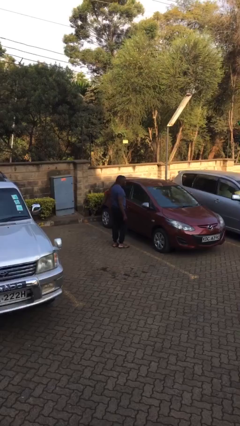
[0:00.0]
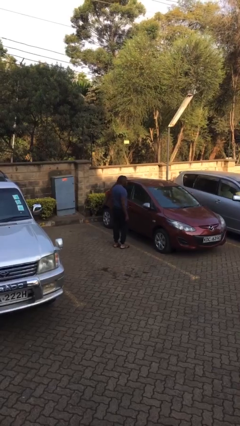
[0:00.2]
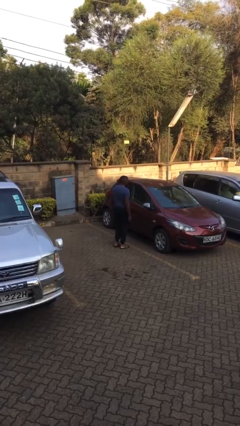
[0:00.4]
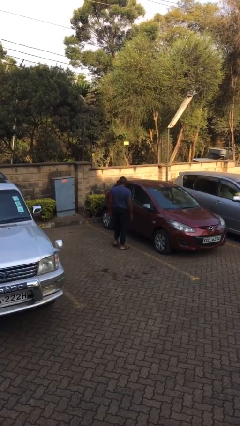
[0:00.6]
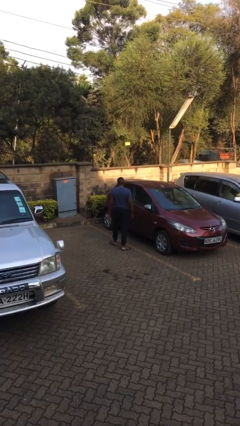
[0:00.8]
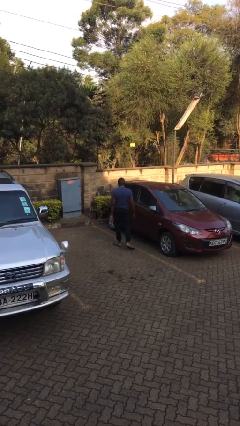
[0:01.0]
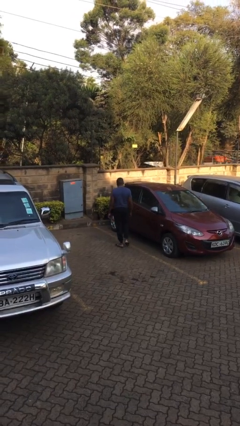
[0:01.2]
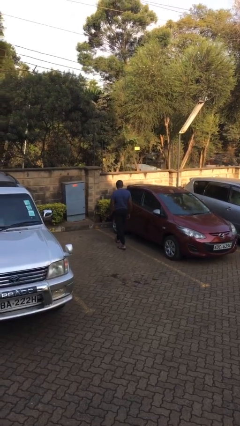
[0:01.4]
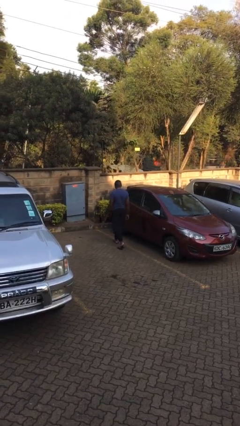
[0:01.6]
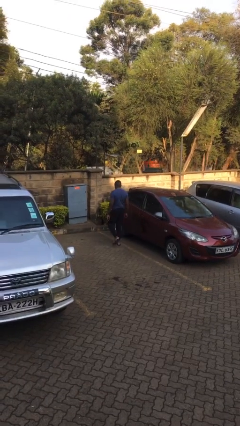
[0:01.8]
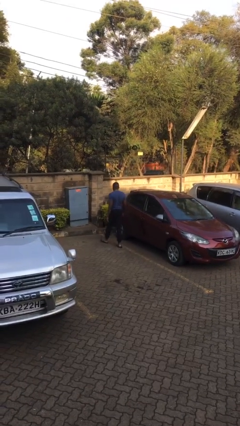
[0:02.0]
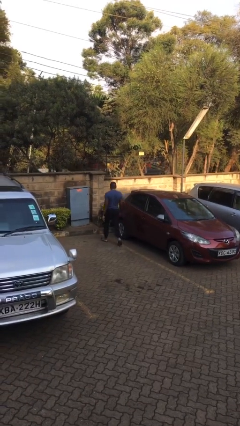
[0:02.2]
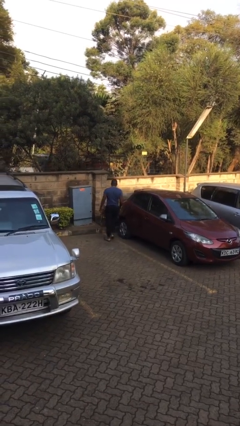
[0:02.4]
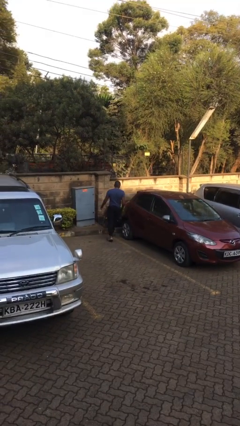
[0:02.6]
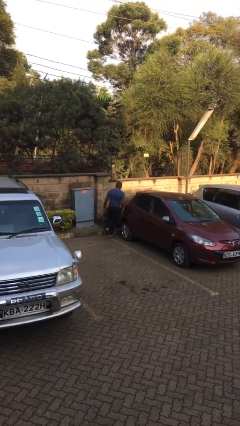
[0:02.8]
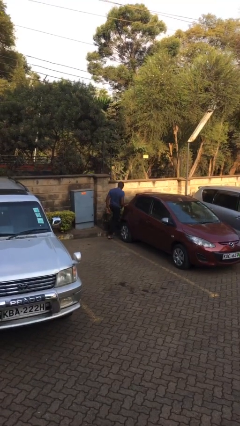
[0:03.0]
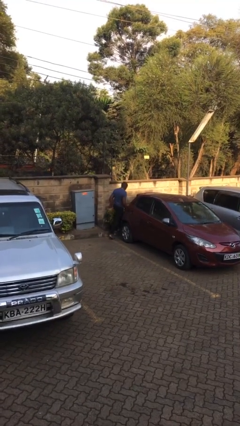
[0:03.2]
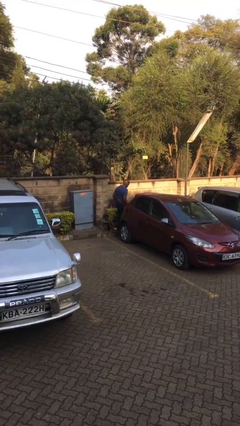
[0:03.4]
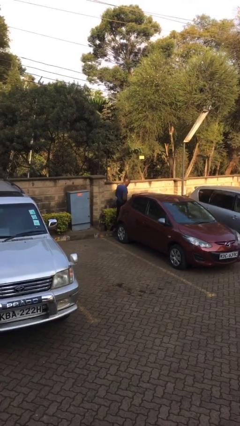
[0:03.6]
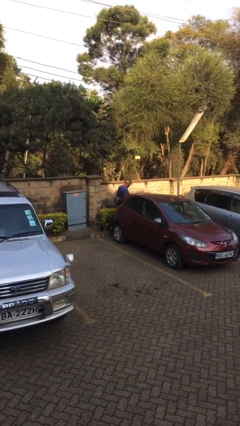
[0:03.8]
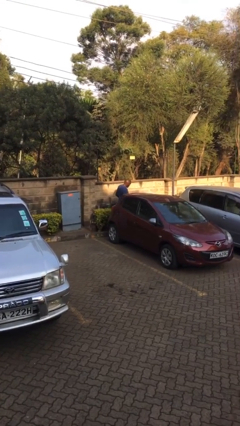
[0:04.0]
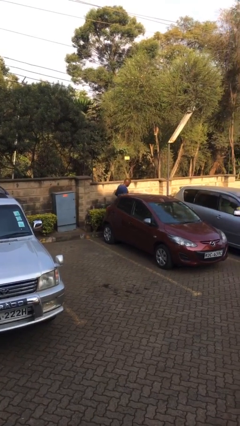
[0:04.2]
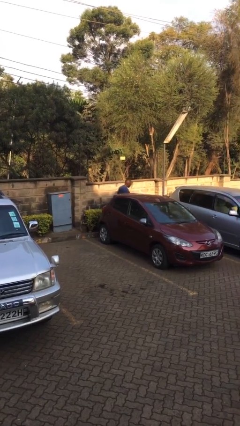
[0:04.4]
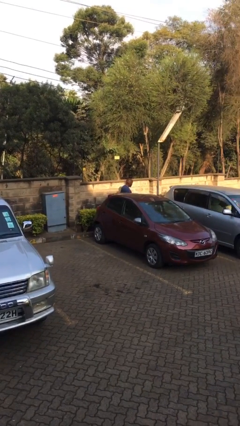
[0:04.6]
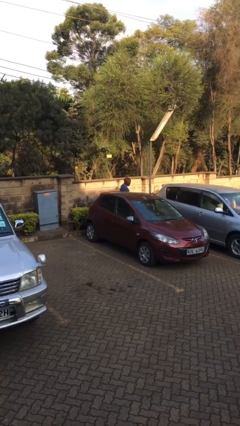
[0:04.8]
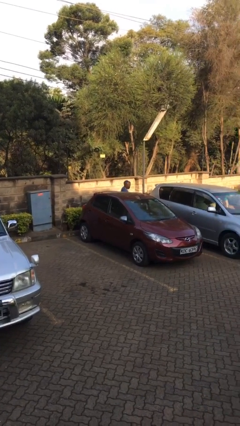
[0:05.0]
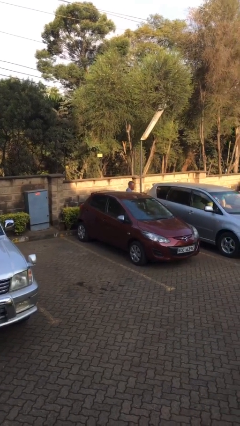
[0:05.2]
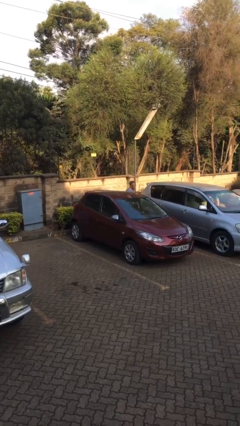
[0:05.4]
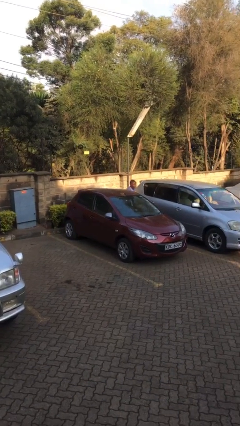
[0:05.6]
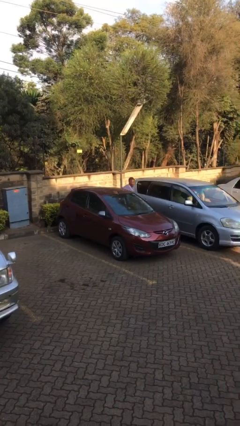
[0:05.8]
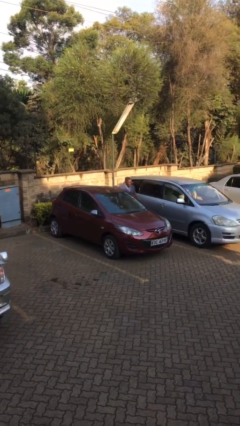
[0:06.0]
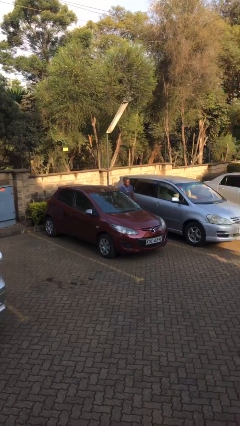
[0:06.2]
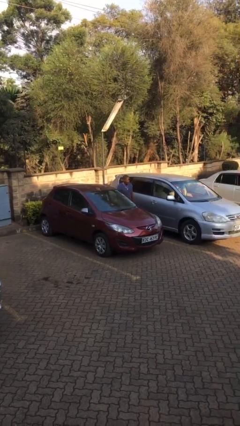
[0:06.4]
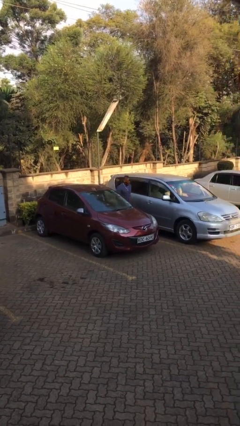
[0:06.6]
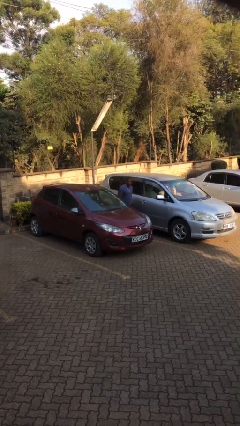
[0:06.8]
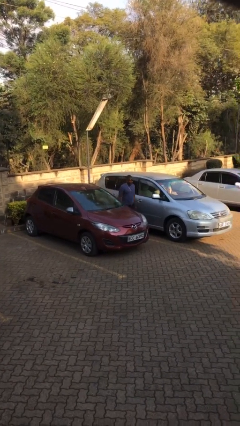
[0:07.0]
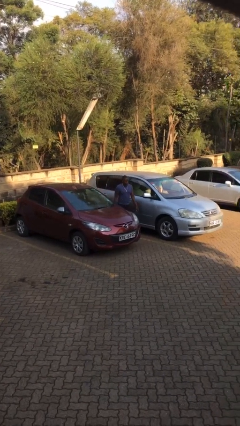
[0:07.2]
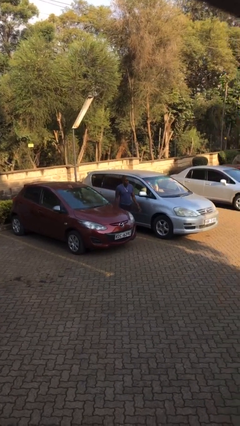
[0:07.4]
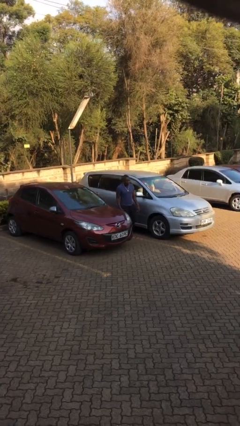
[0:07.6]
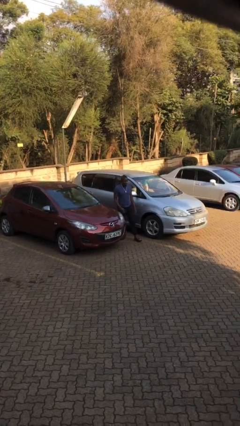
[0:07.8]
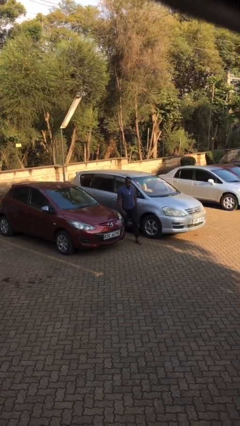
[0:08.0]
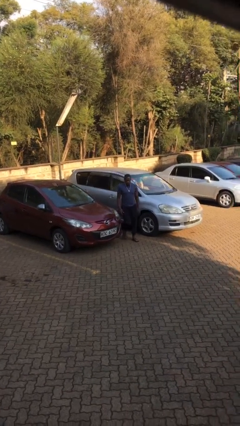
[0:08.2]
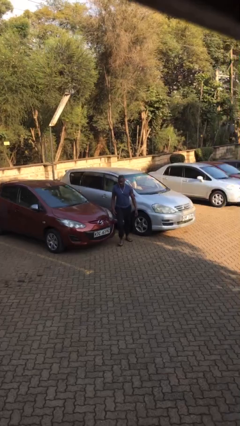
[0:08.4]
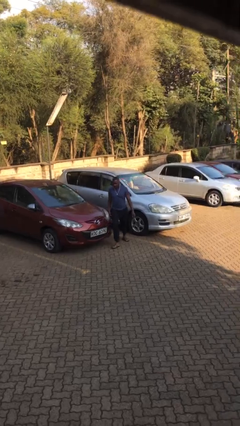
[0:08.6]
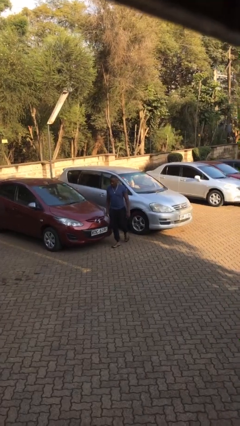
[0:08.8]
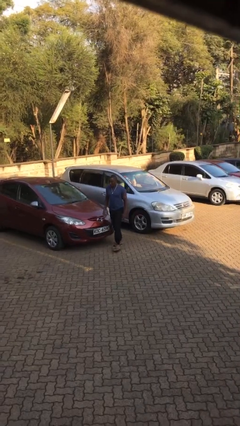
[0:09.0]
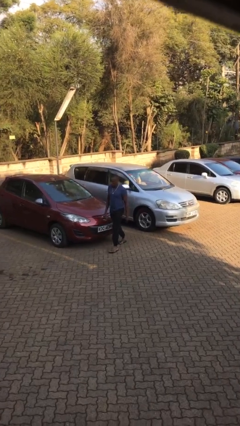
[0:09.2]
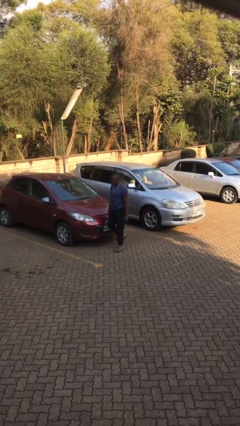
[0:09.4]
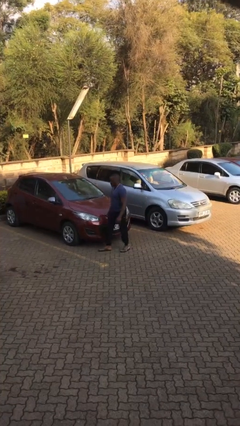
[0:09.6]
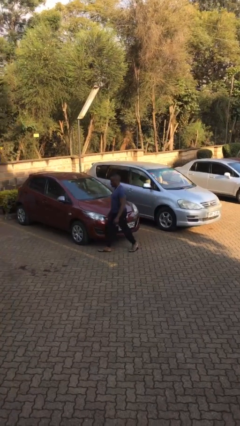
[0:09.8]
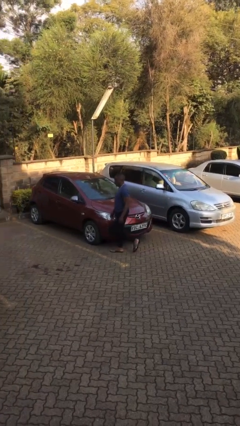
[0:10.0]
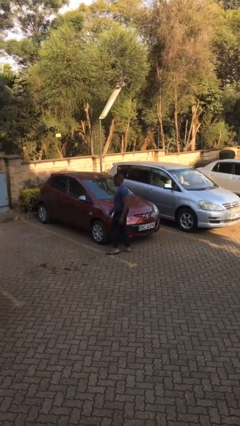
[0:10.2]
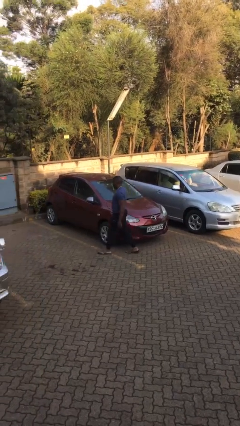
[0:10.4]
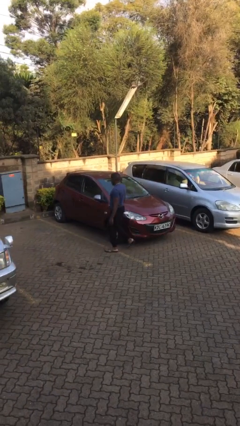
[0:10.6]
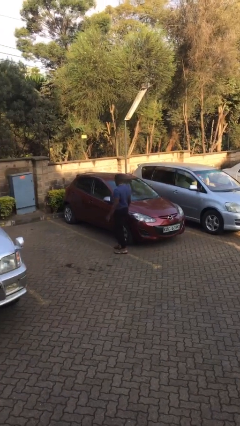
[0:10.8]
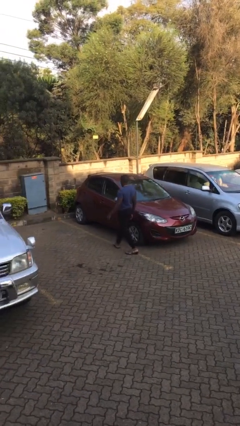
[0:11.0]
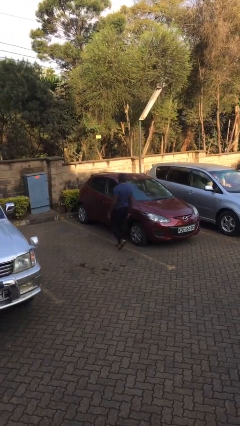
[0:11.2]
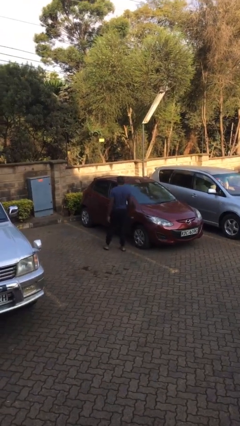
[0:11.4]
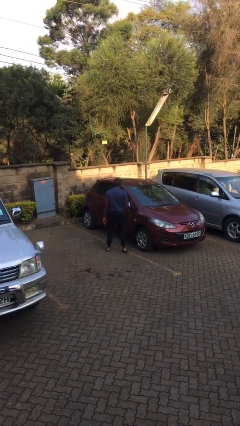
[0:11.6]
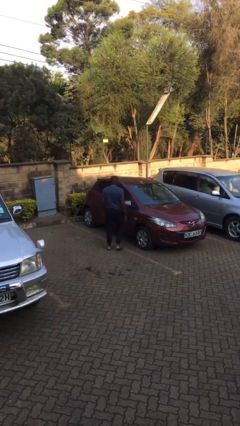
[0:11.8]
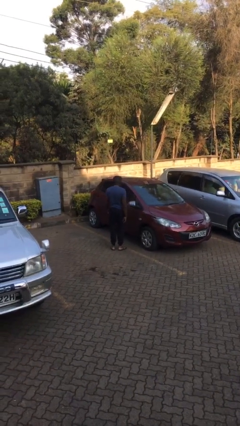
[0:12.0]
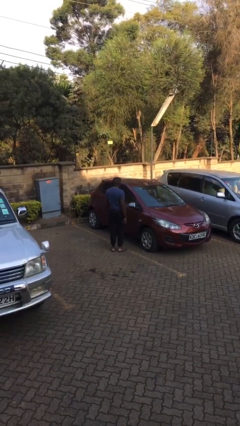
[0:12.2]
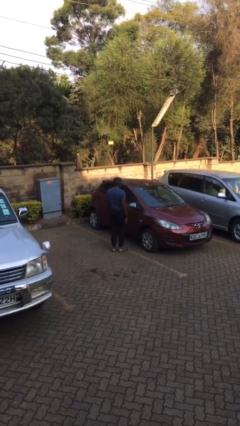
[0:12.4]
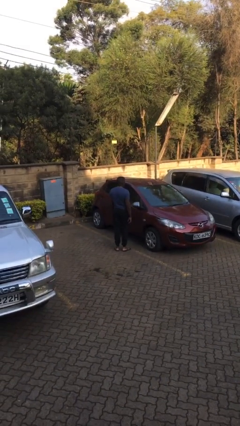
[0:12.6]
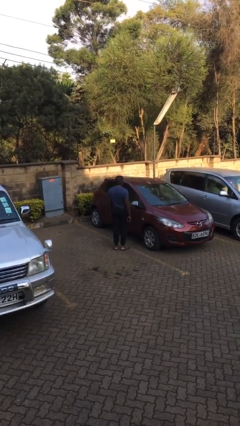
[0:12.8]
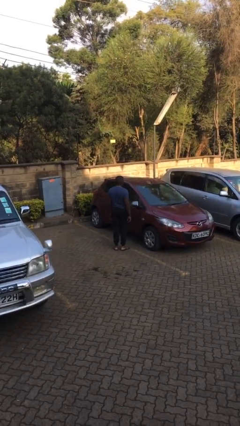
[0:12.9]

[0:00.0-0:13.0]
person walks around car

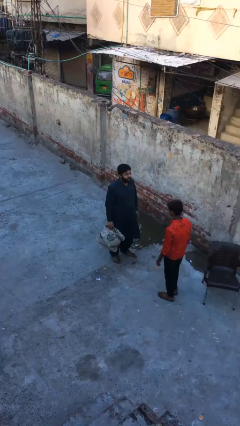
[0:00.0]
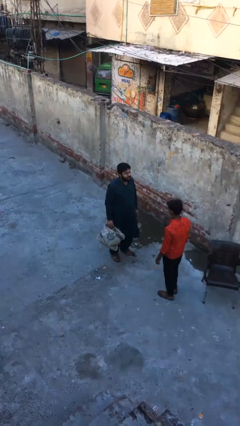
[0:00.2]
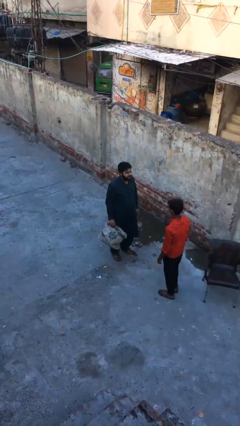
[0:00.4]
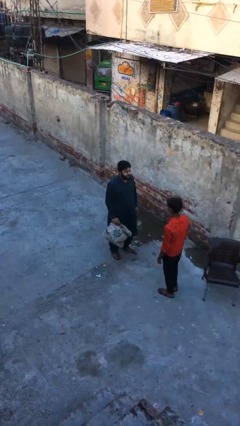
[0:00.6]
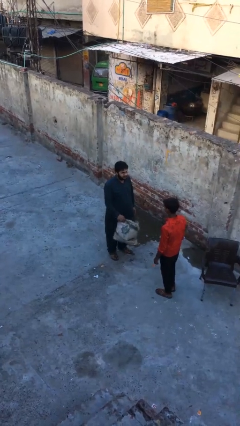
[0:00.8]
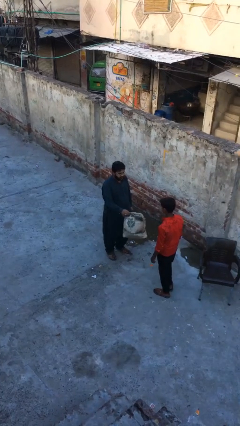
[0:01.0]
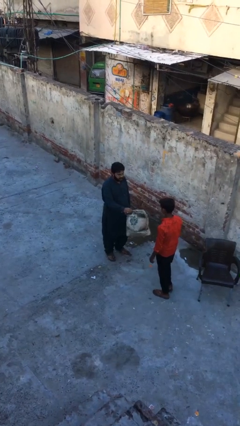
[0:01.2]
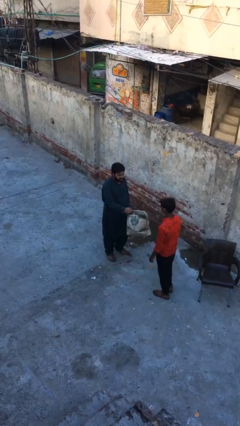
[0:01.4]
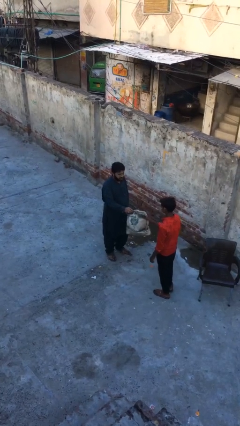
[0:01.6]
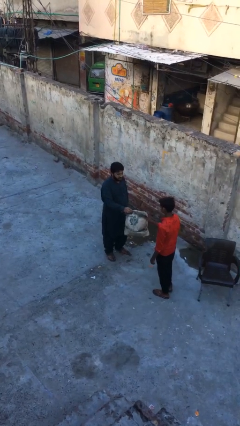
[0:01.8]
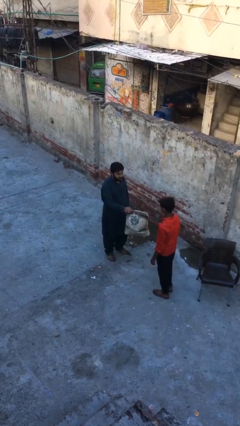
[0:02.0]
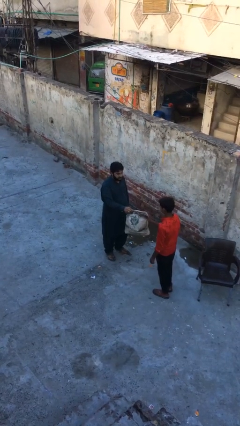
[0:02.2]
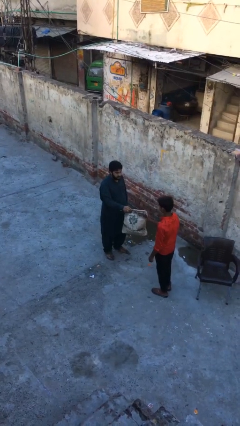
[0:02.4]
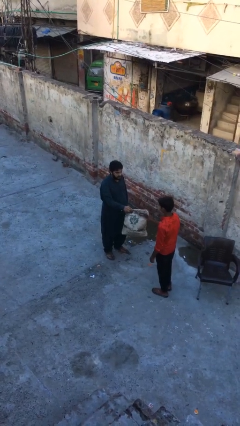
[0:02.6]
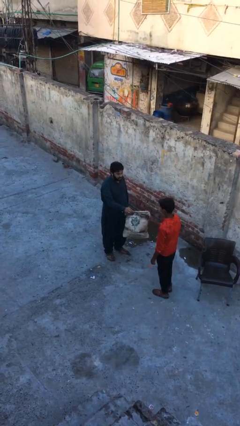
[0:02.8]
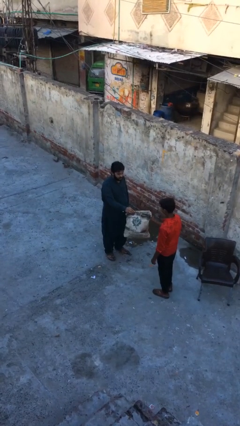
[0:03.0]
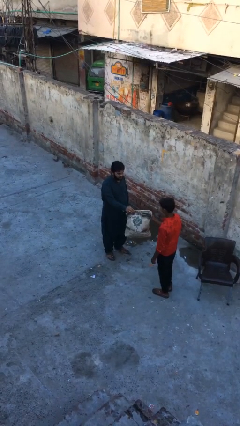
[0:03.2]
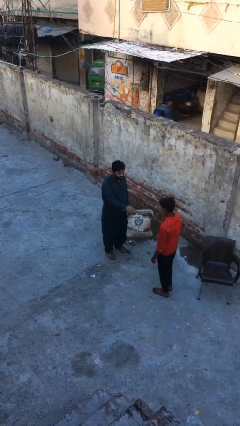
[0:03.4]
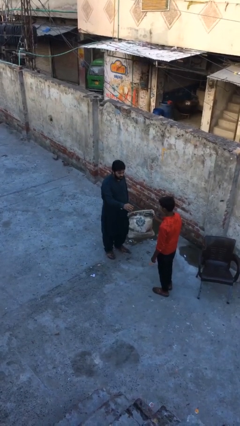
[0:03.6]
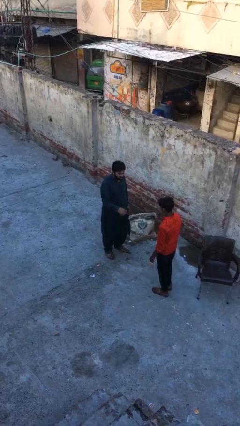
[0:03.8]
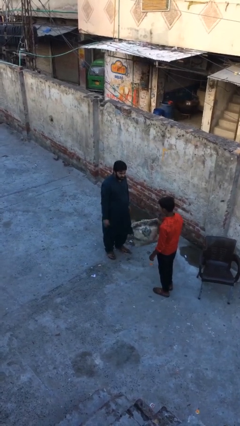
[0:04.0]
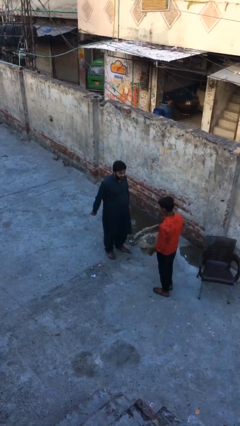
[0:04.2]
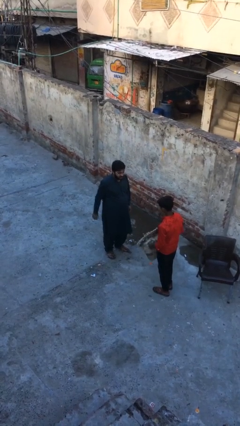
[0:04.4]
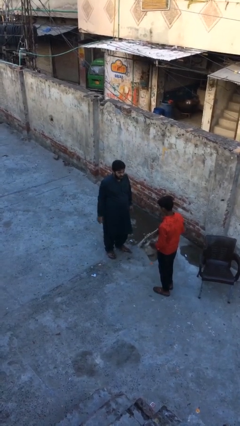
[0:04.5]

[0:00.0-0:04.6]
person transfers object to person

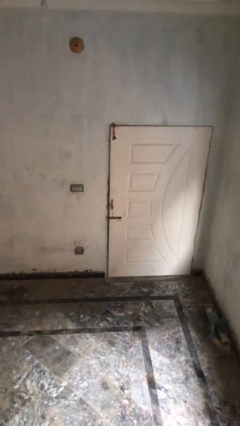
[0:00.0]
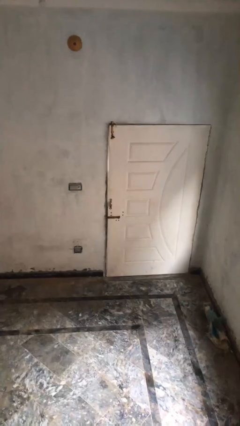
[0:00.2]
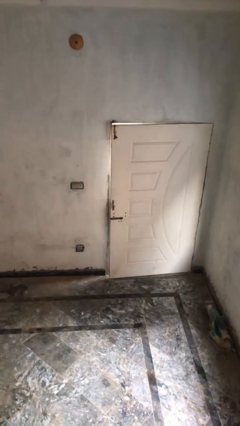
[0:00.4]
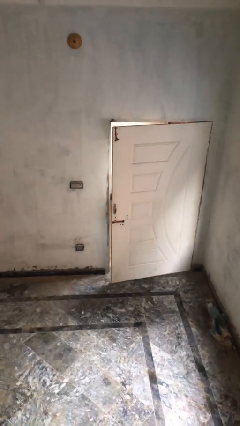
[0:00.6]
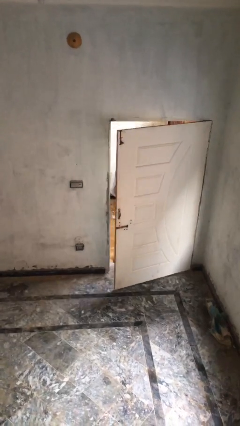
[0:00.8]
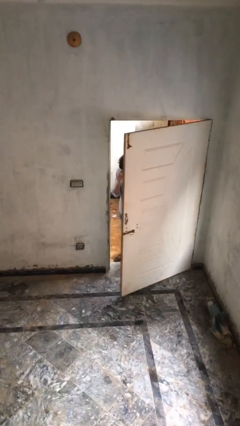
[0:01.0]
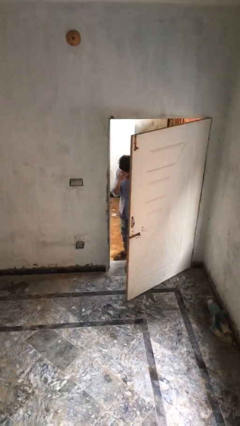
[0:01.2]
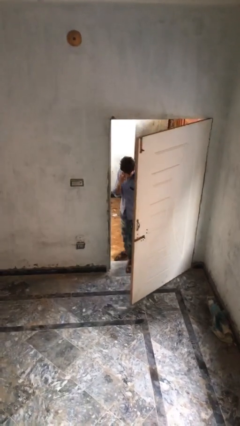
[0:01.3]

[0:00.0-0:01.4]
person opens facility door
